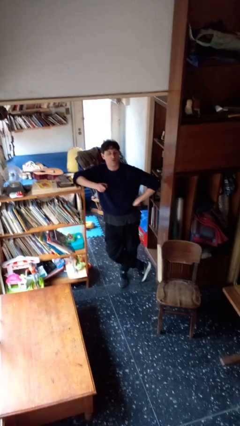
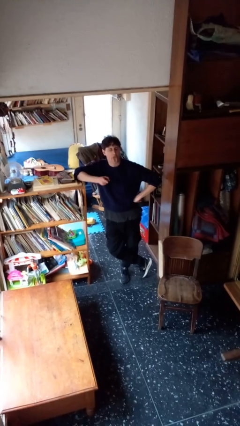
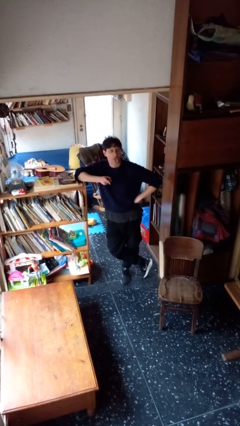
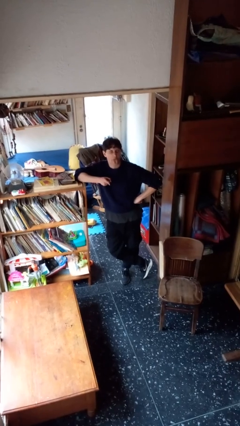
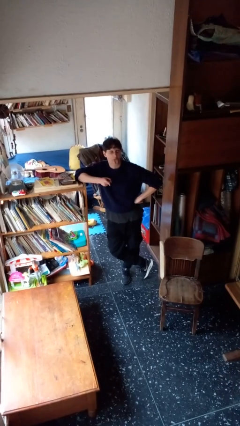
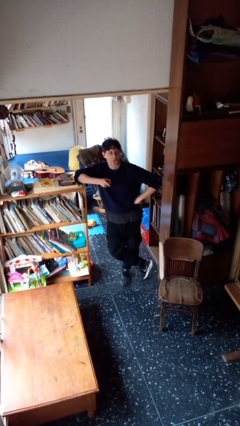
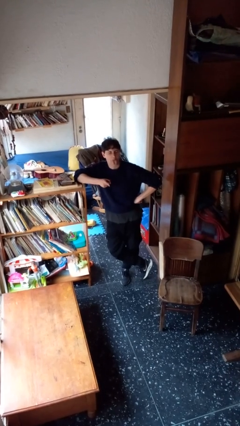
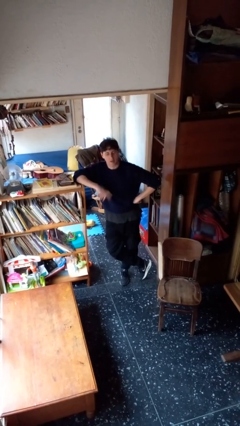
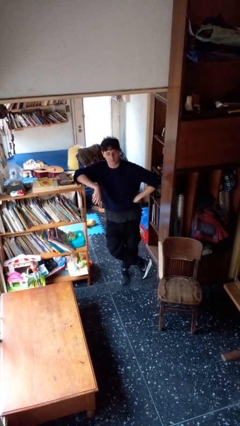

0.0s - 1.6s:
person sticks out tongue

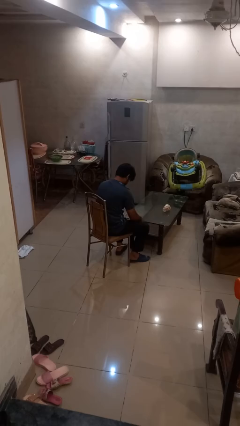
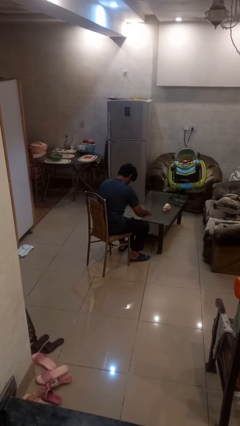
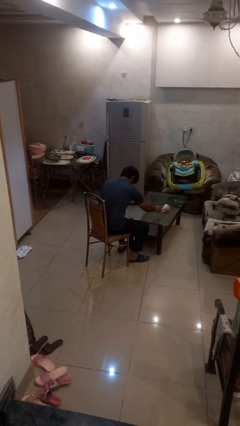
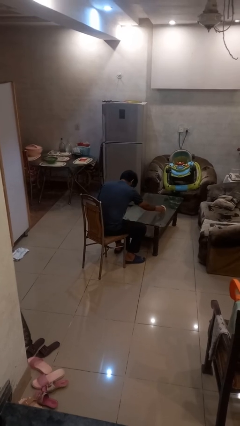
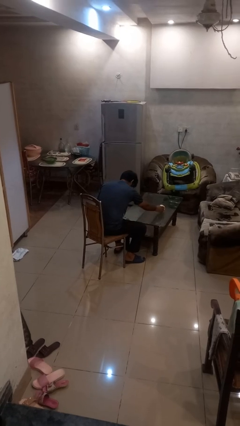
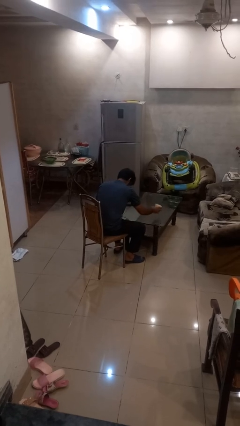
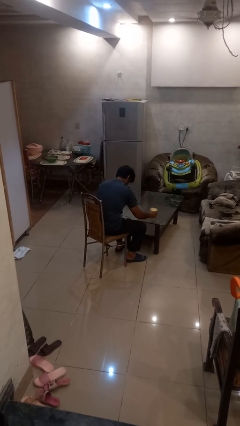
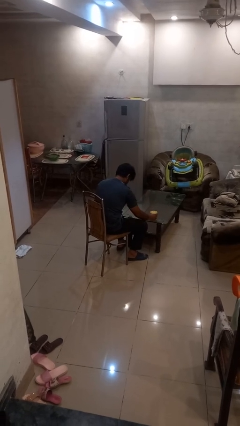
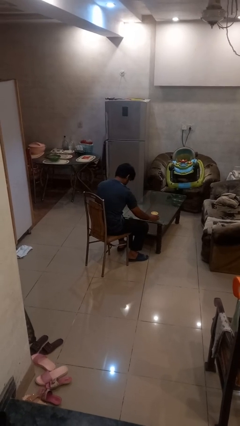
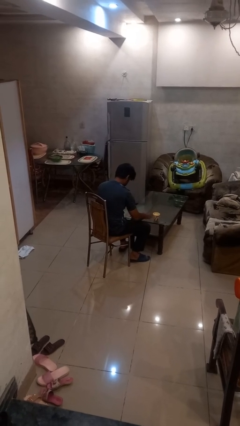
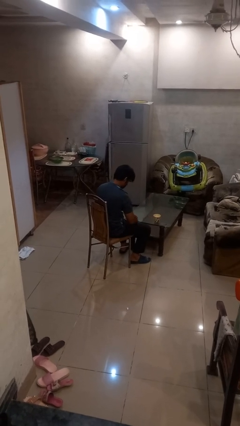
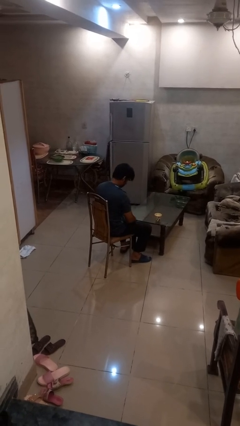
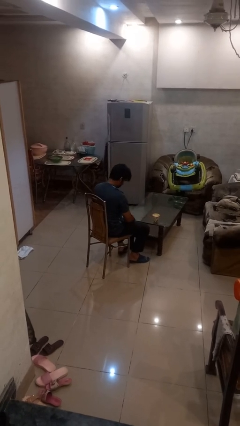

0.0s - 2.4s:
person sets upright glass

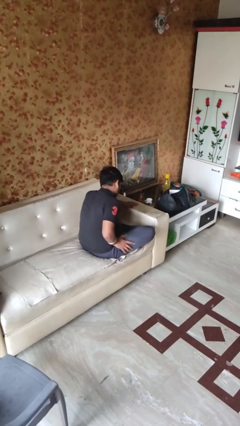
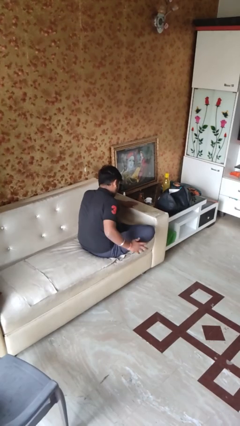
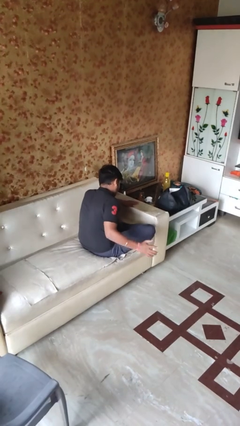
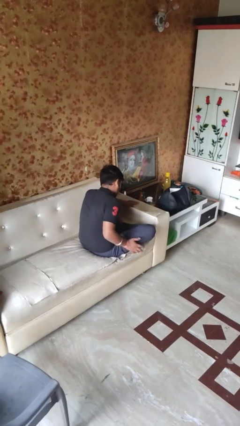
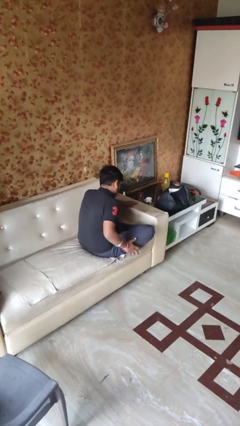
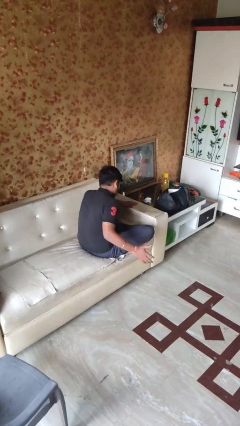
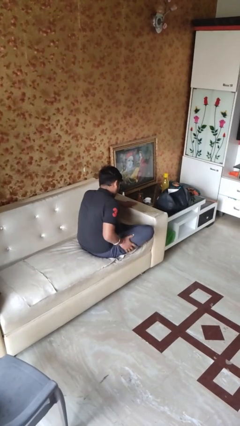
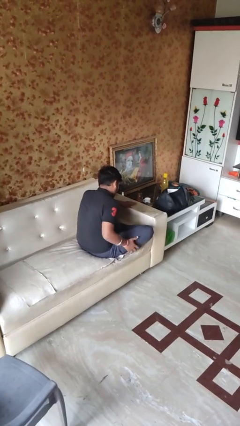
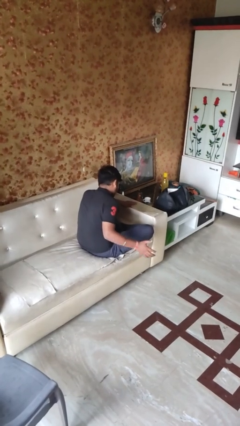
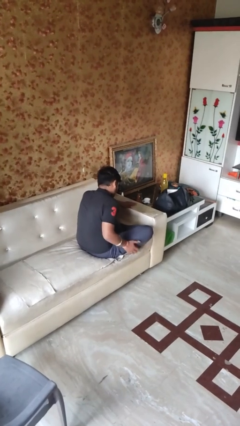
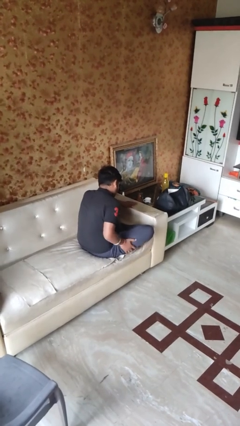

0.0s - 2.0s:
person slaps hands on thighs

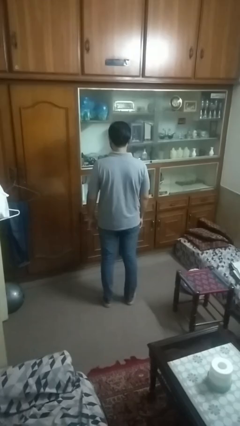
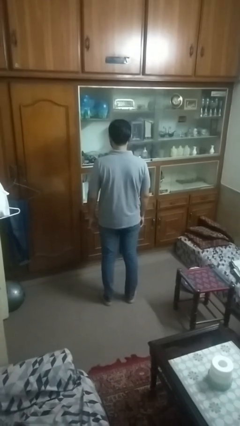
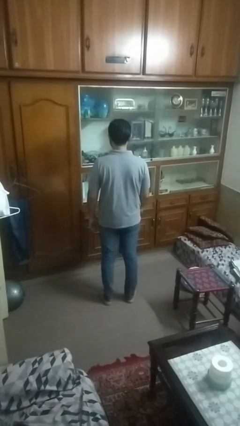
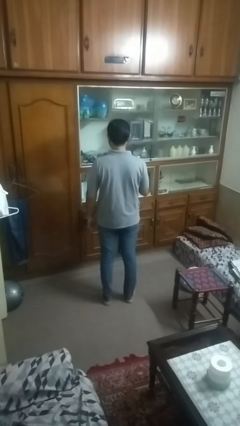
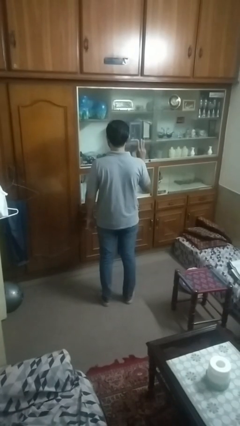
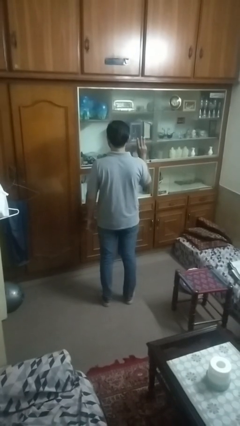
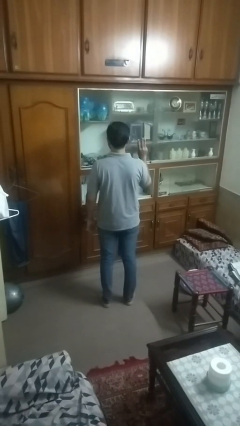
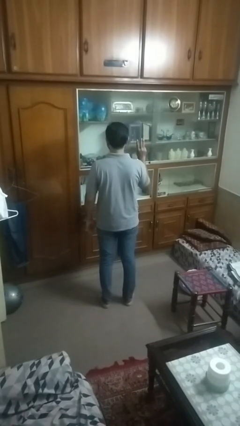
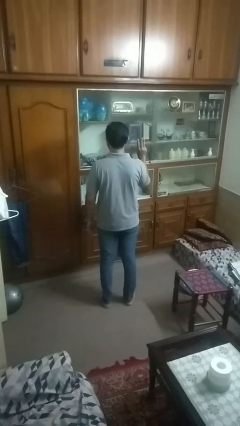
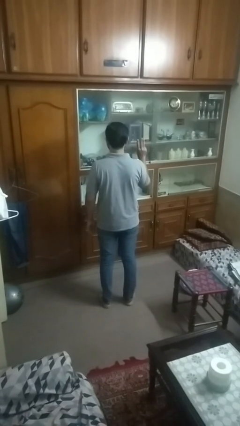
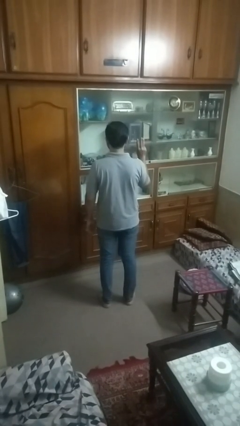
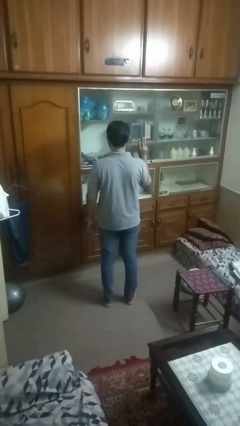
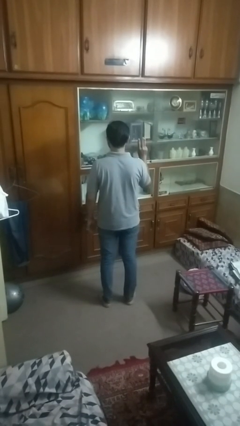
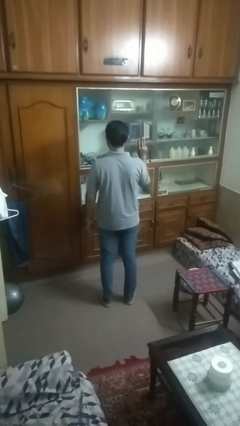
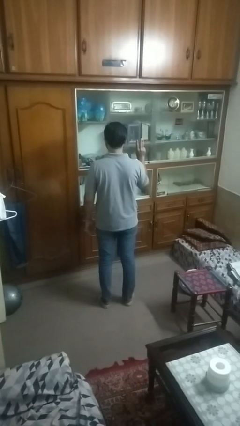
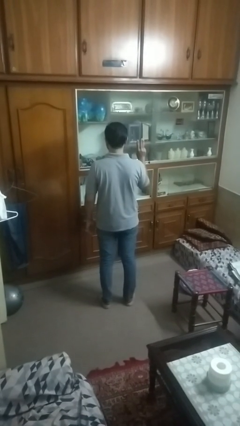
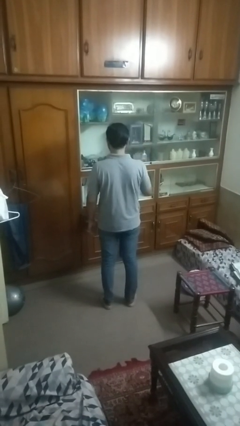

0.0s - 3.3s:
person gestures number three

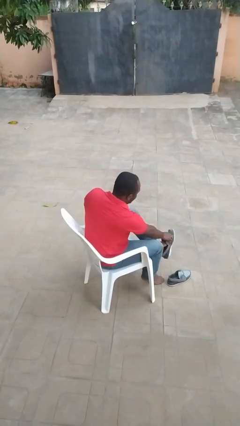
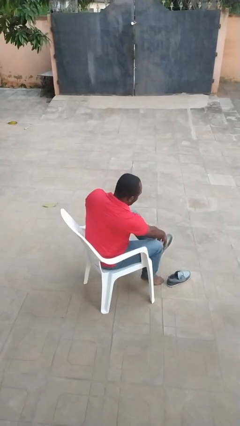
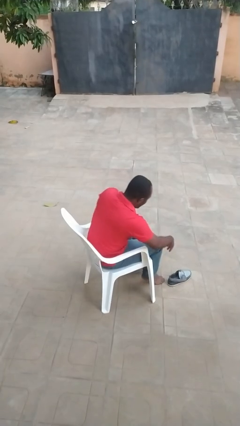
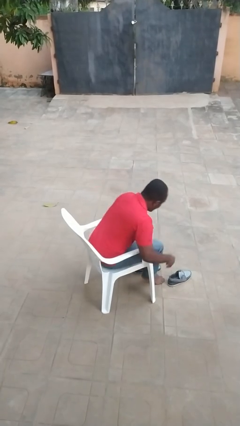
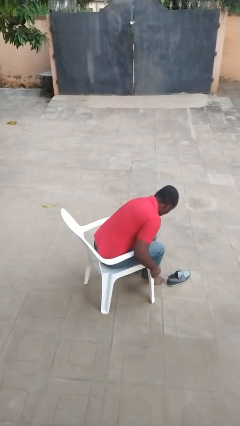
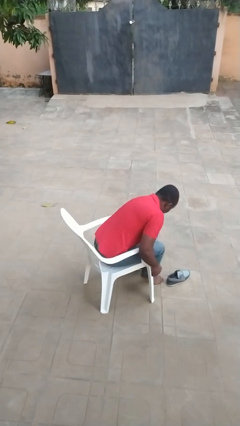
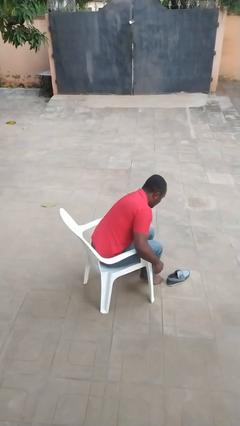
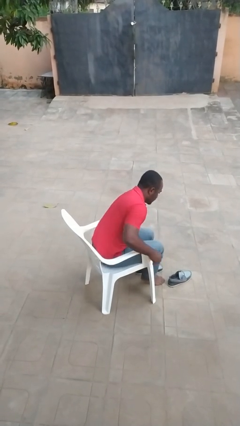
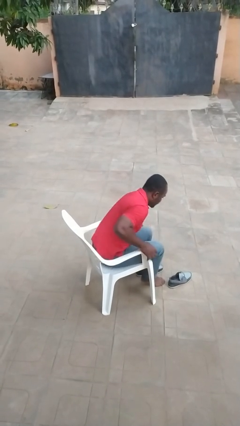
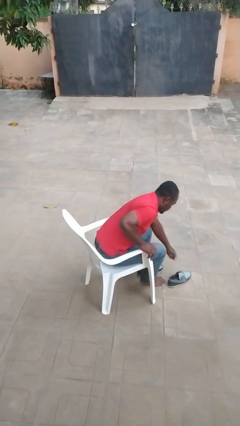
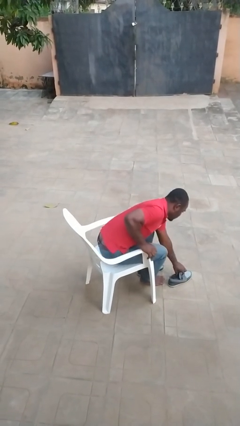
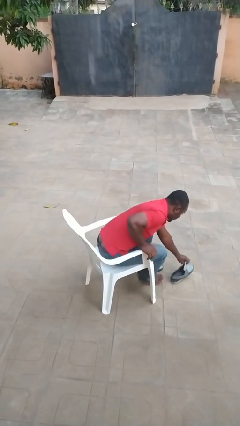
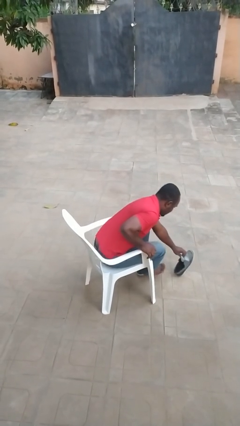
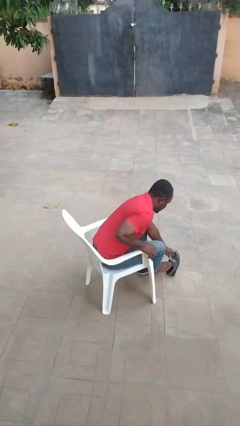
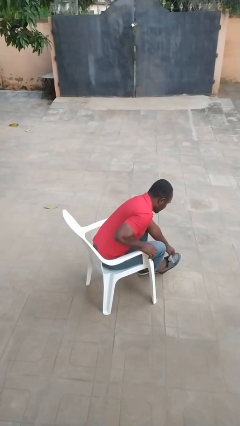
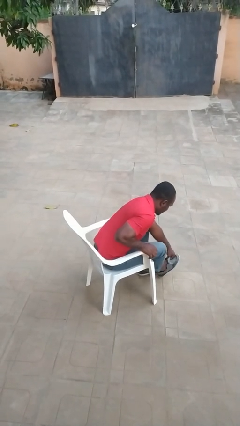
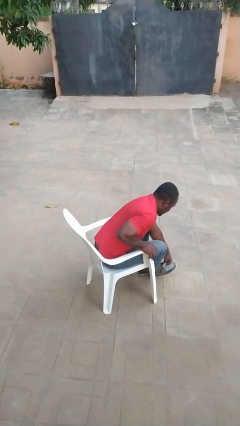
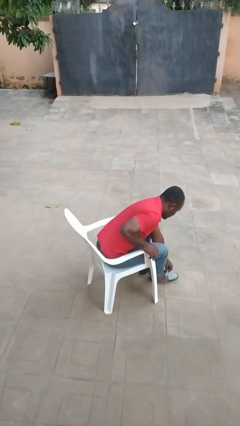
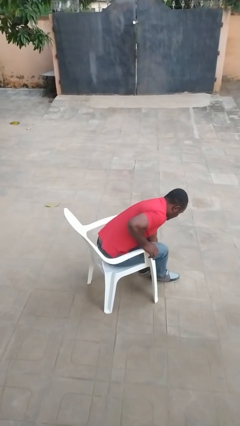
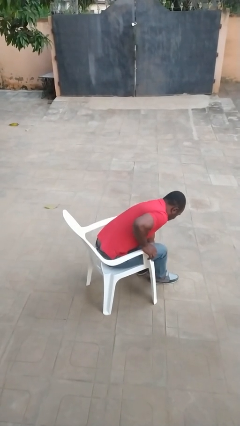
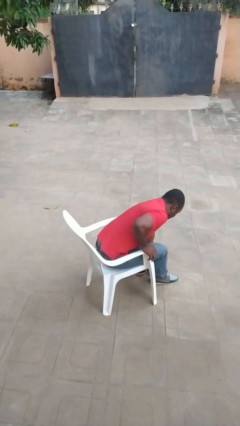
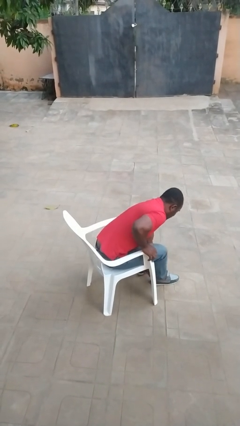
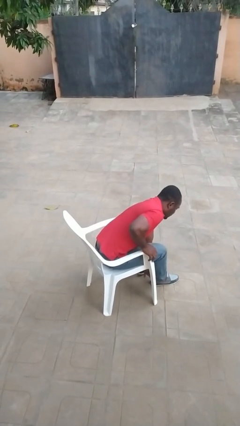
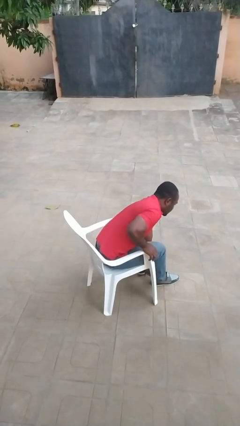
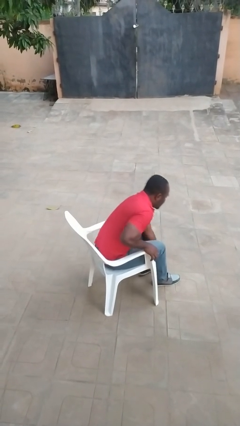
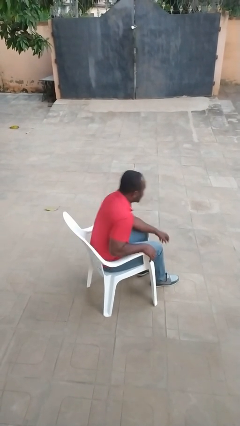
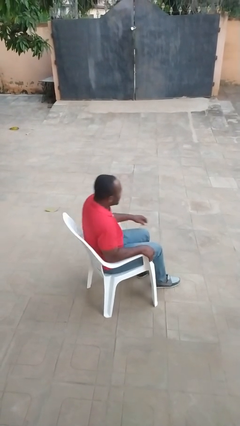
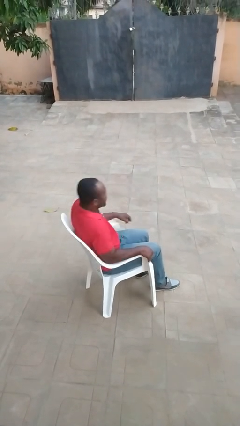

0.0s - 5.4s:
person puts on shoes

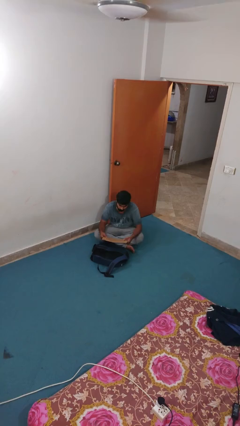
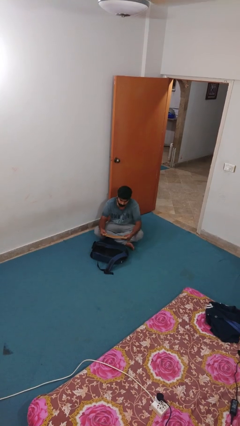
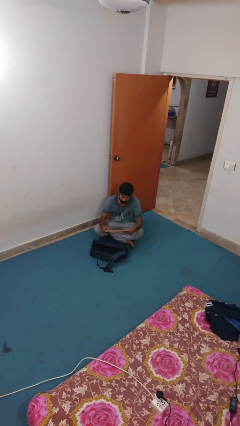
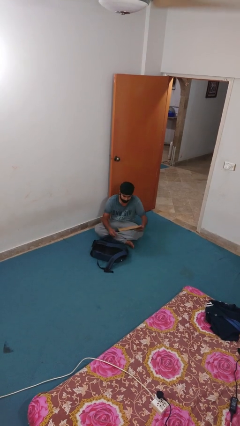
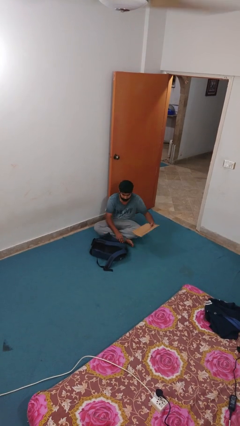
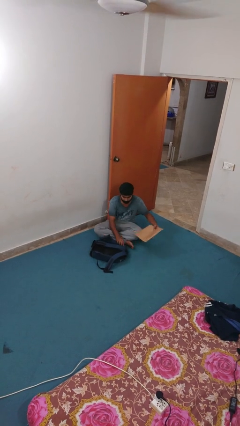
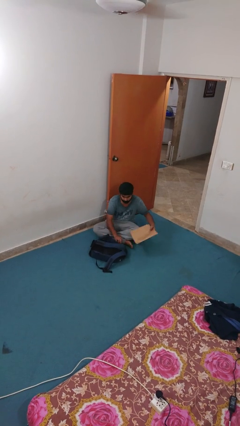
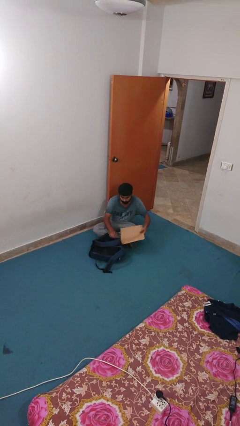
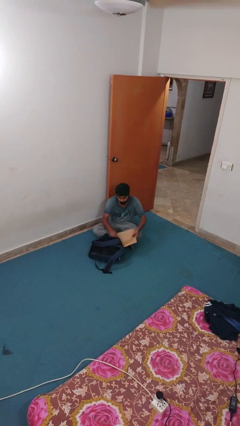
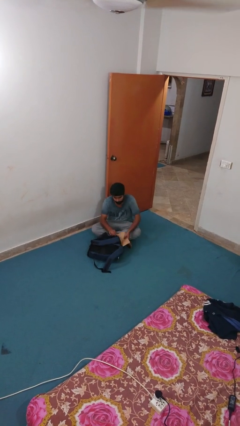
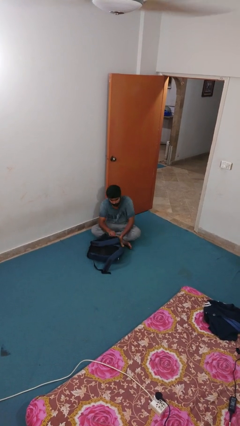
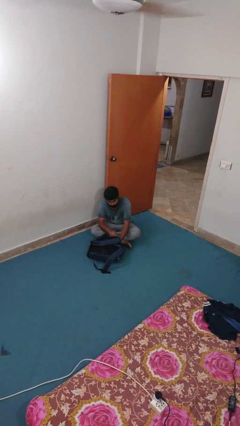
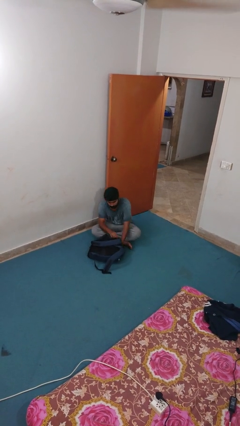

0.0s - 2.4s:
person puts object into backpack

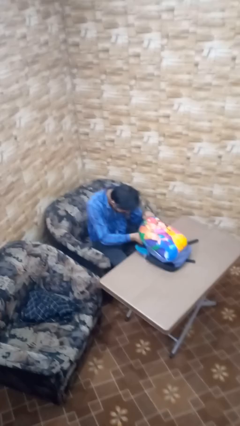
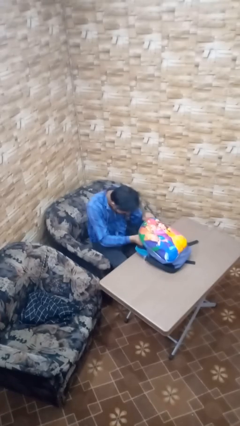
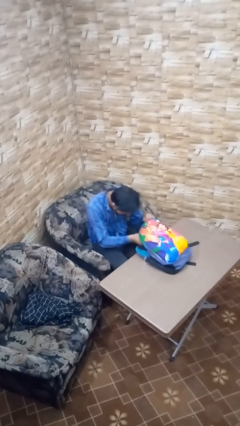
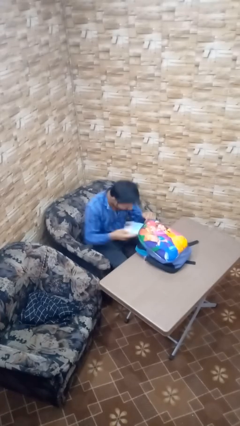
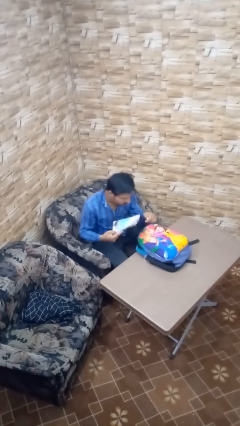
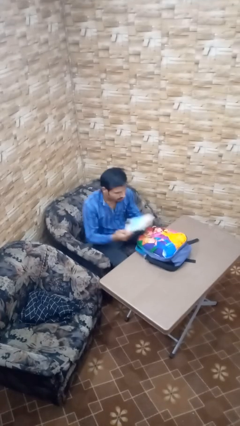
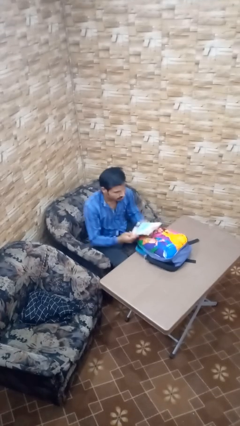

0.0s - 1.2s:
person takes object from backpack
